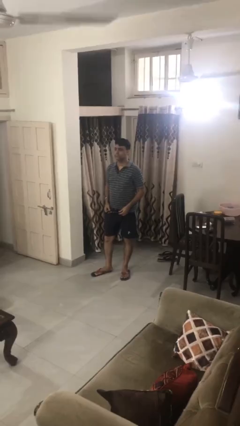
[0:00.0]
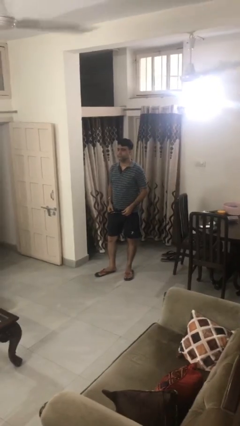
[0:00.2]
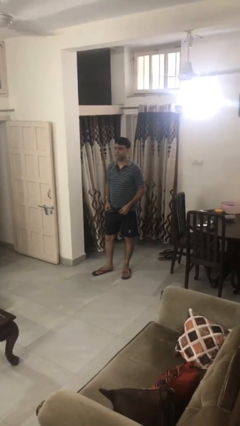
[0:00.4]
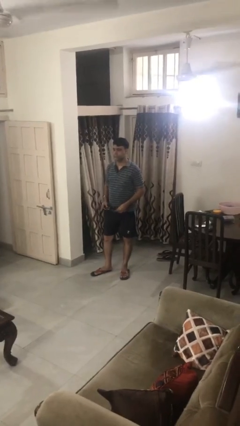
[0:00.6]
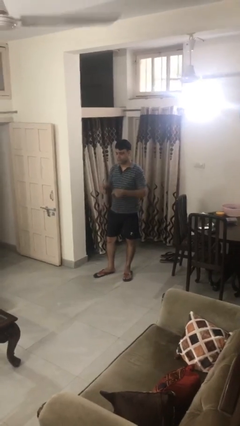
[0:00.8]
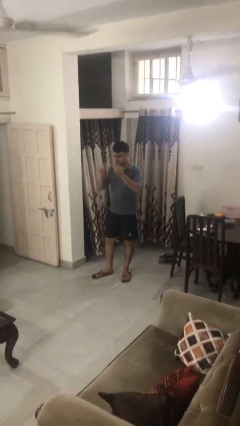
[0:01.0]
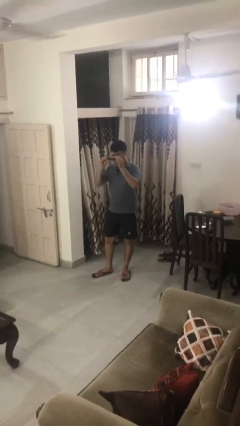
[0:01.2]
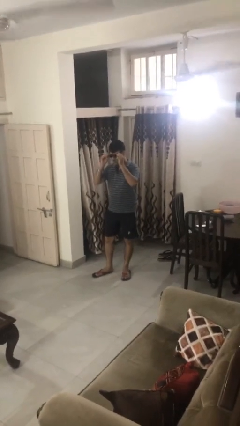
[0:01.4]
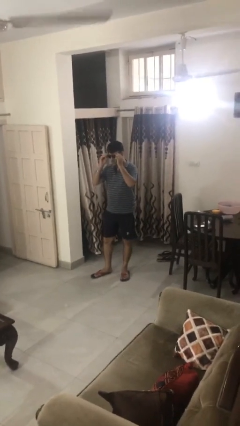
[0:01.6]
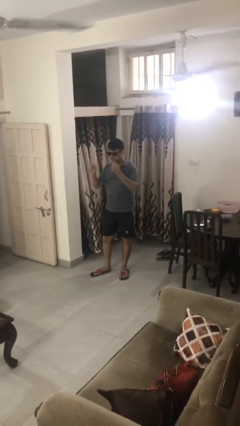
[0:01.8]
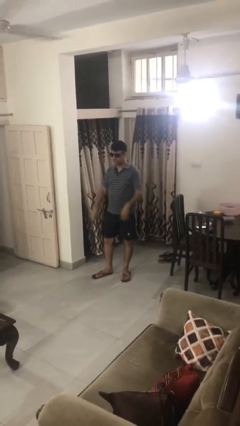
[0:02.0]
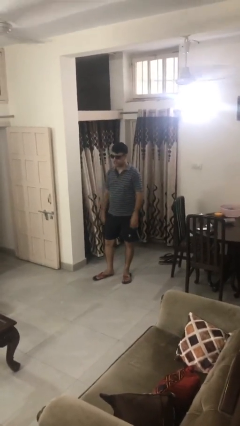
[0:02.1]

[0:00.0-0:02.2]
person puts on sunglasses

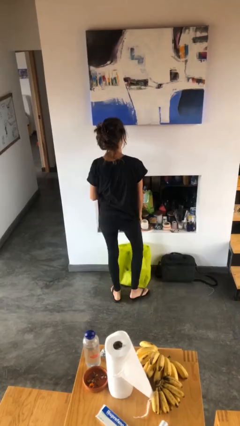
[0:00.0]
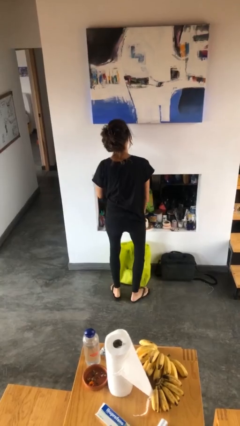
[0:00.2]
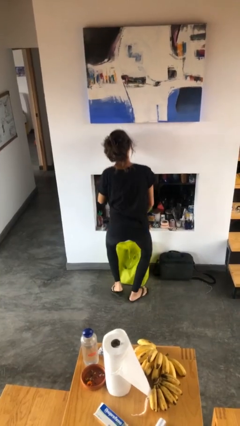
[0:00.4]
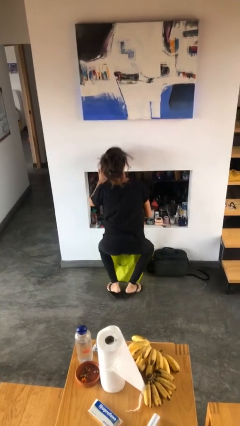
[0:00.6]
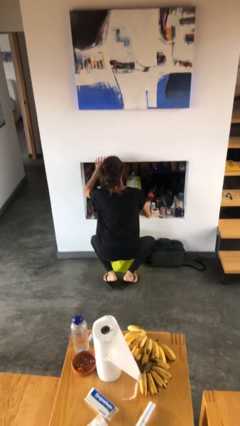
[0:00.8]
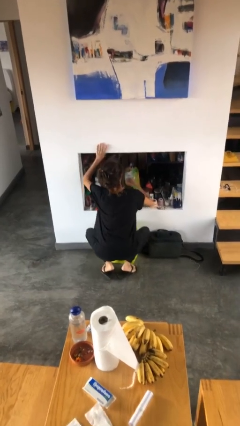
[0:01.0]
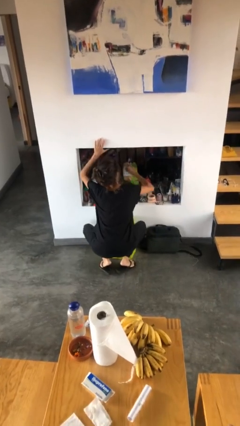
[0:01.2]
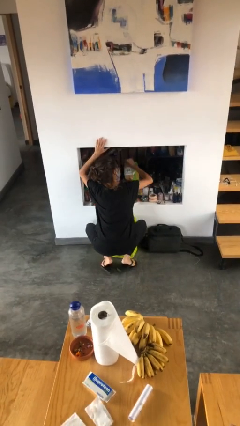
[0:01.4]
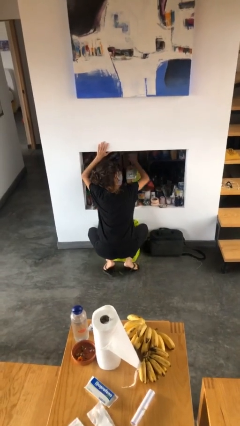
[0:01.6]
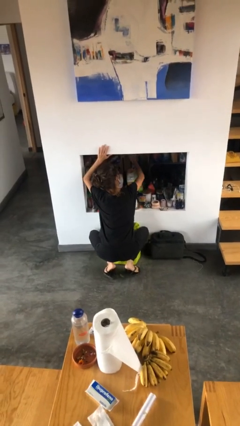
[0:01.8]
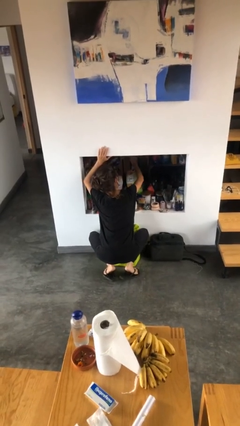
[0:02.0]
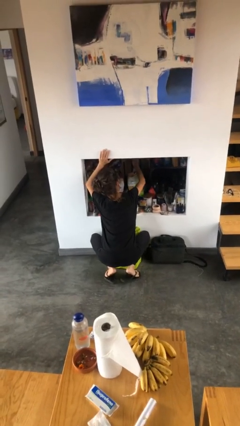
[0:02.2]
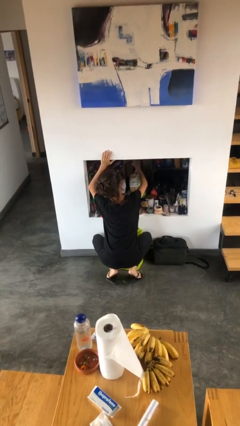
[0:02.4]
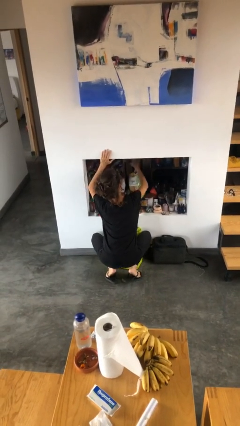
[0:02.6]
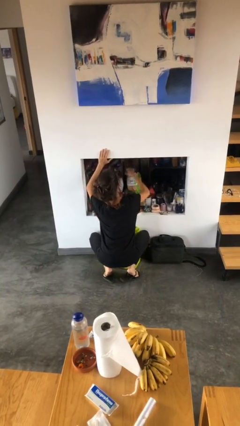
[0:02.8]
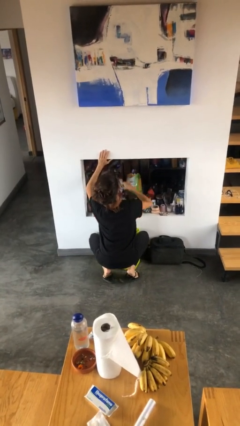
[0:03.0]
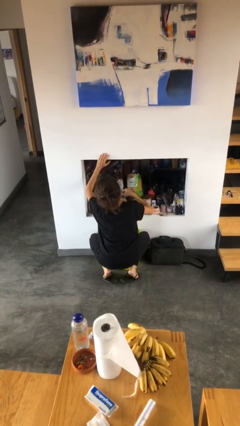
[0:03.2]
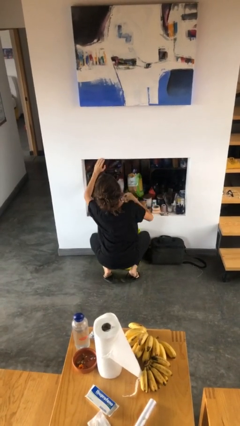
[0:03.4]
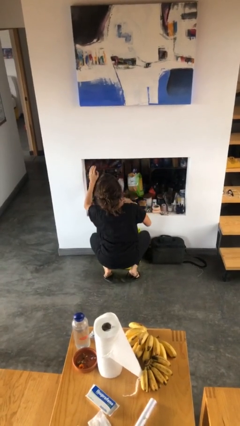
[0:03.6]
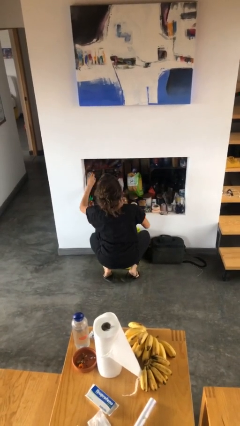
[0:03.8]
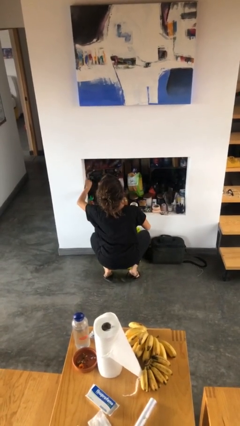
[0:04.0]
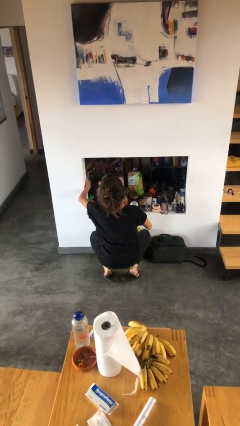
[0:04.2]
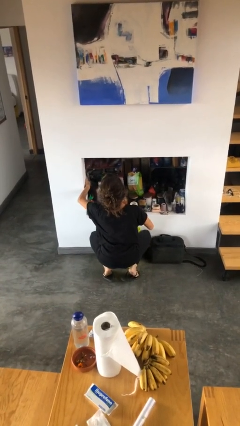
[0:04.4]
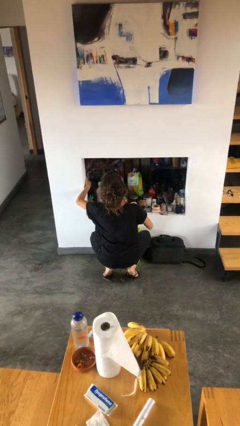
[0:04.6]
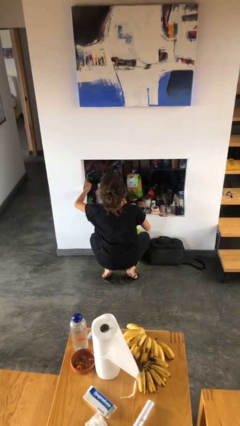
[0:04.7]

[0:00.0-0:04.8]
person searches in cabinet

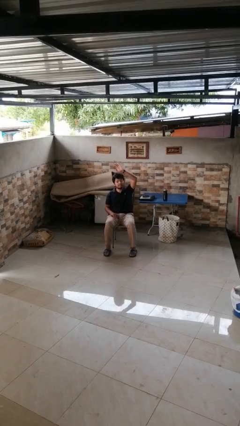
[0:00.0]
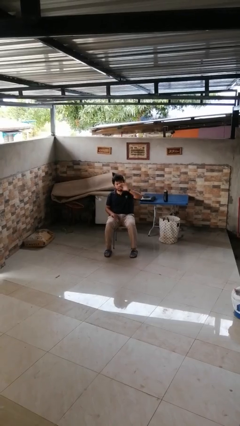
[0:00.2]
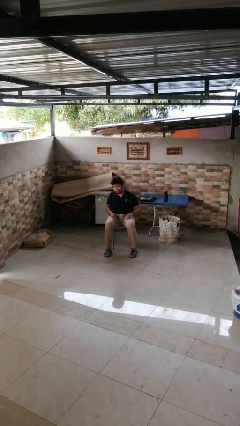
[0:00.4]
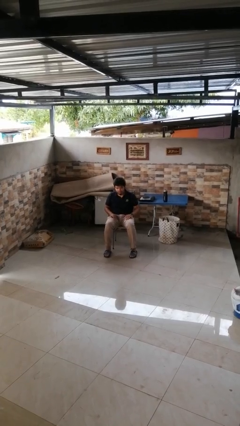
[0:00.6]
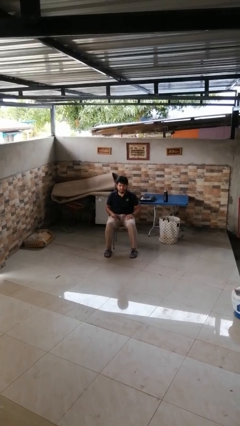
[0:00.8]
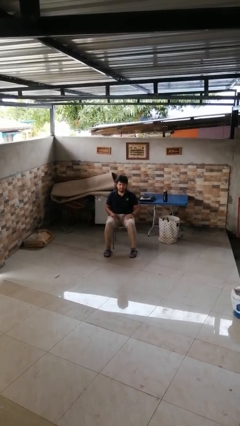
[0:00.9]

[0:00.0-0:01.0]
person gestures lower hand

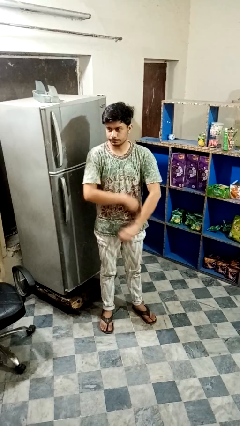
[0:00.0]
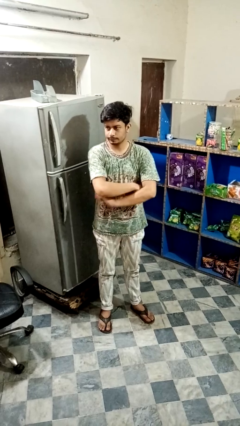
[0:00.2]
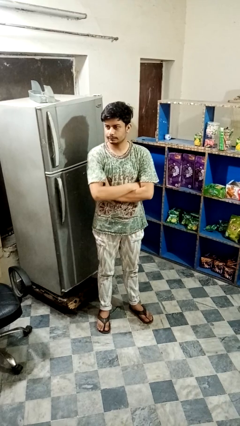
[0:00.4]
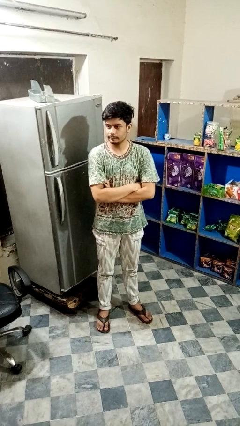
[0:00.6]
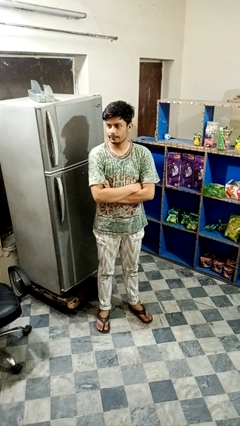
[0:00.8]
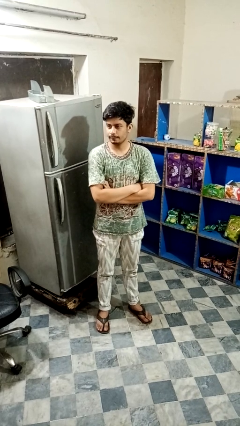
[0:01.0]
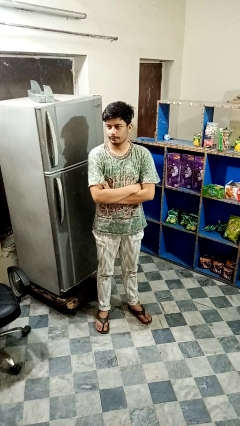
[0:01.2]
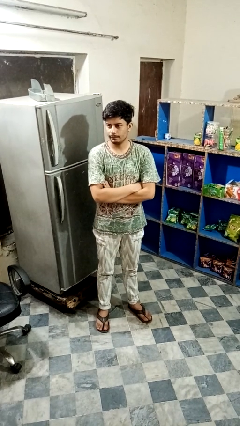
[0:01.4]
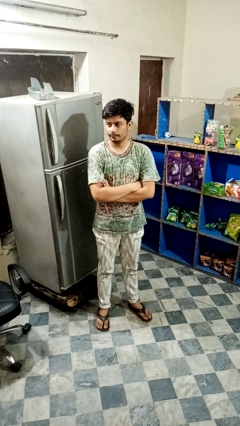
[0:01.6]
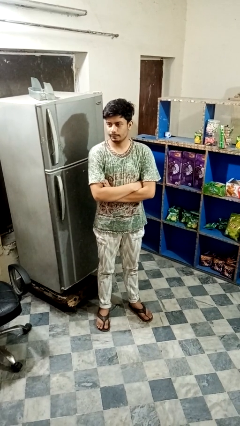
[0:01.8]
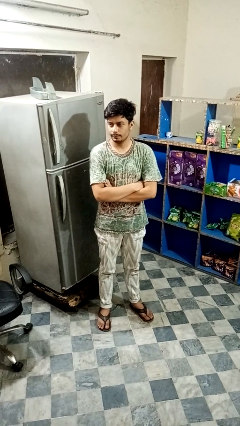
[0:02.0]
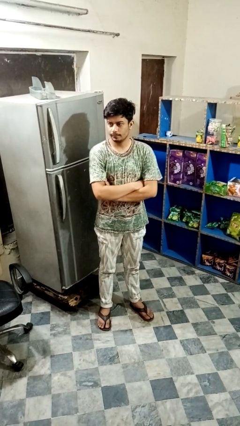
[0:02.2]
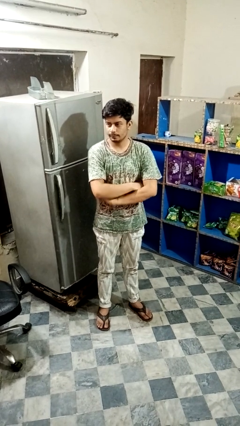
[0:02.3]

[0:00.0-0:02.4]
person crosses arms

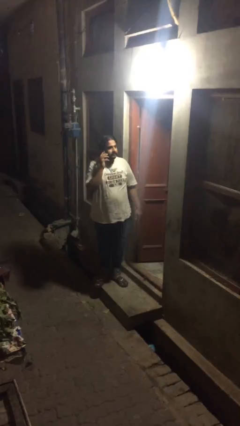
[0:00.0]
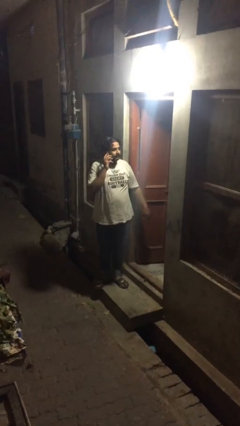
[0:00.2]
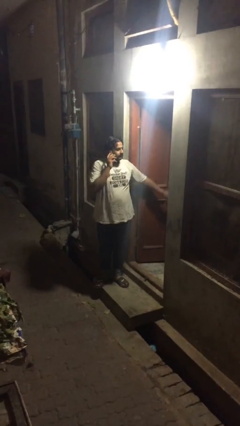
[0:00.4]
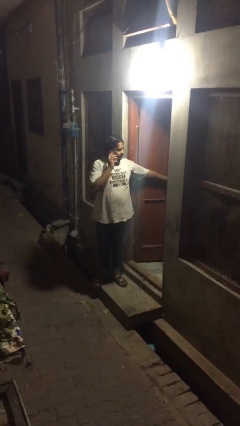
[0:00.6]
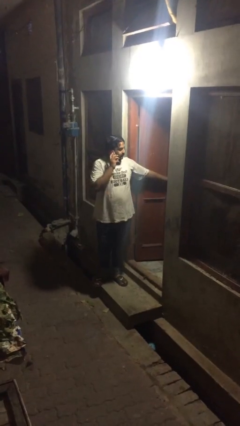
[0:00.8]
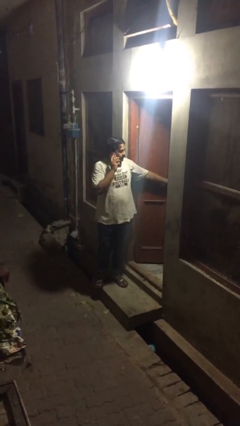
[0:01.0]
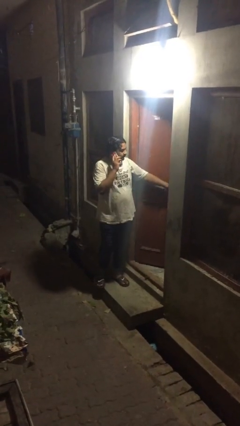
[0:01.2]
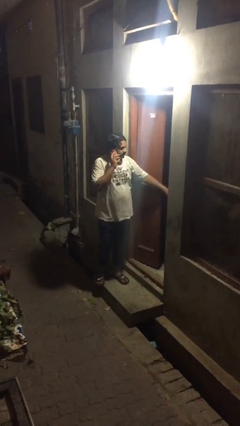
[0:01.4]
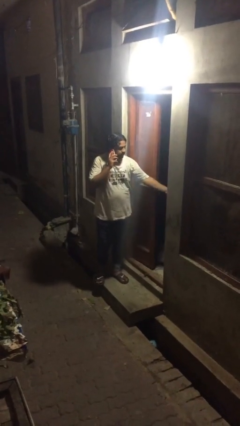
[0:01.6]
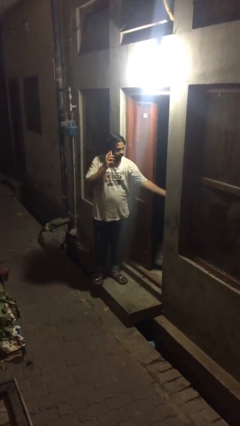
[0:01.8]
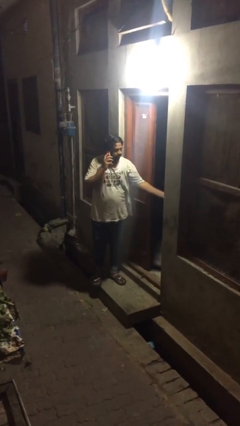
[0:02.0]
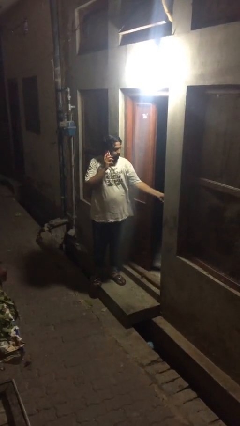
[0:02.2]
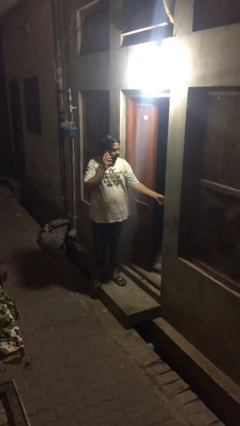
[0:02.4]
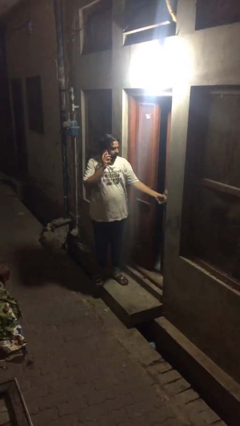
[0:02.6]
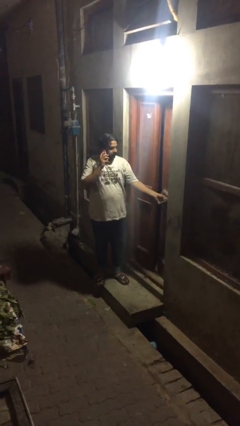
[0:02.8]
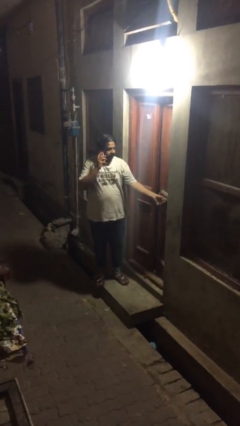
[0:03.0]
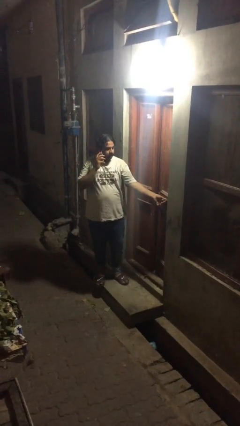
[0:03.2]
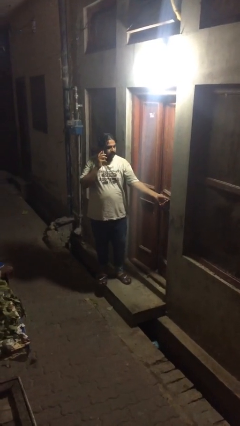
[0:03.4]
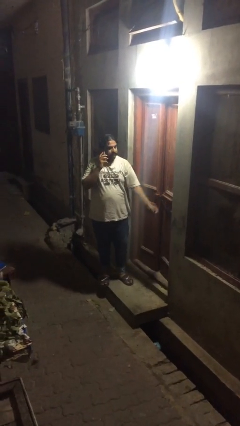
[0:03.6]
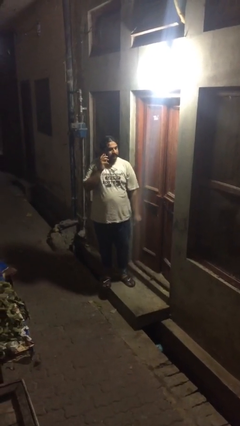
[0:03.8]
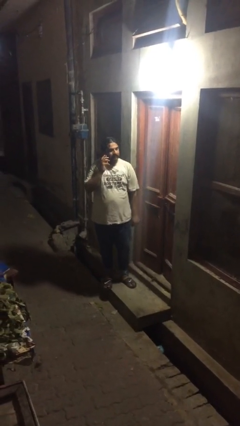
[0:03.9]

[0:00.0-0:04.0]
person closes facility door

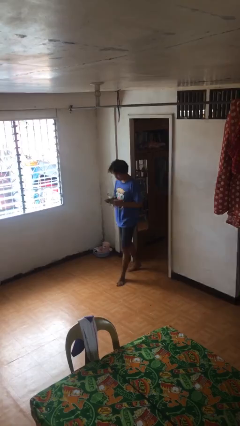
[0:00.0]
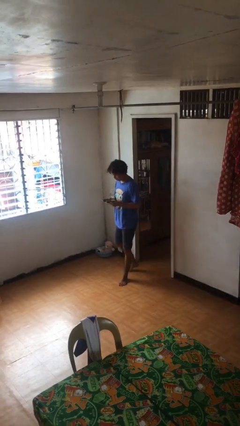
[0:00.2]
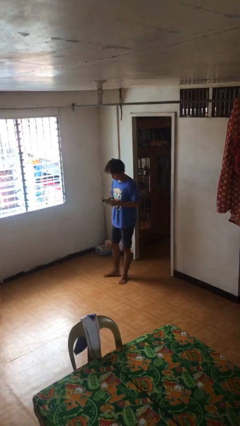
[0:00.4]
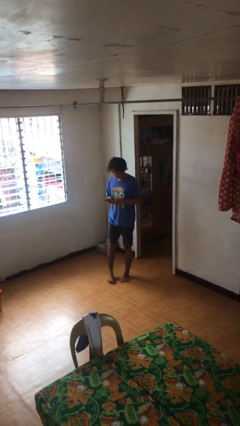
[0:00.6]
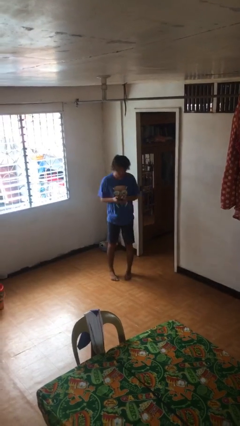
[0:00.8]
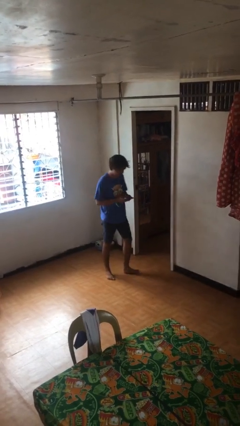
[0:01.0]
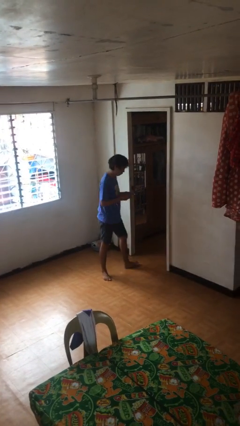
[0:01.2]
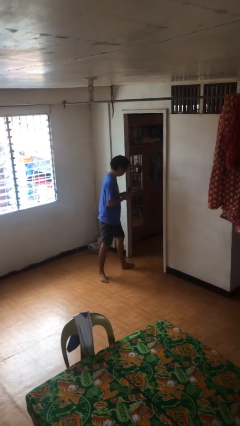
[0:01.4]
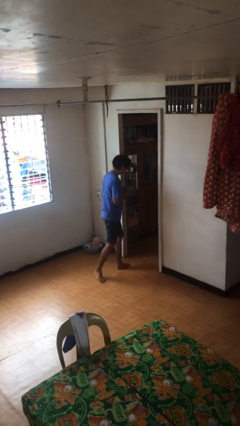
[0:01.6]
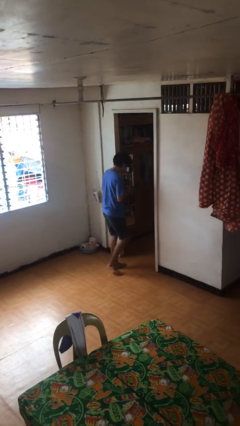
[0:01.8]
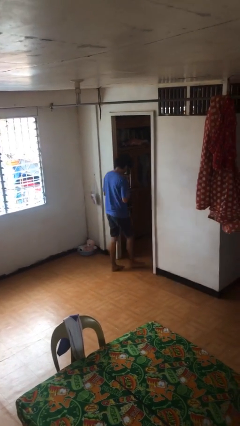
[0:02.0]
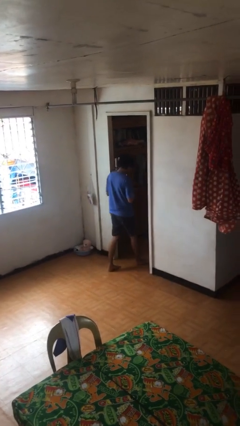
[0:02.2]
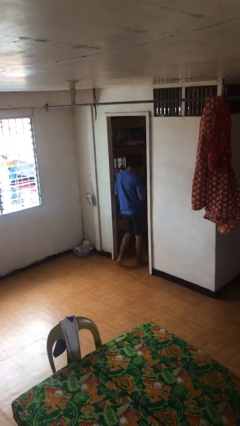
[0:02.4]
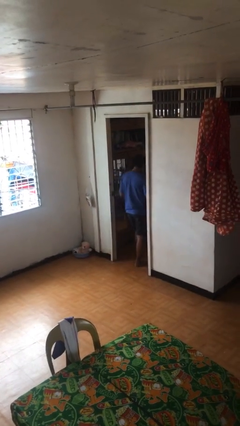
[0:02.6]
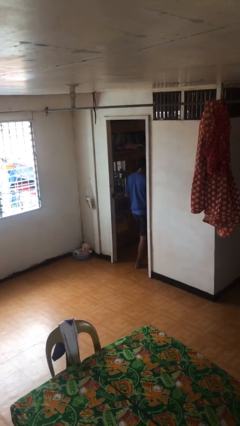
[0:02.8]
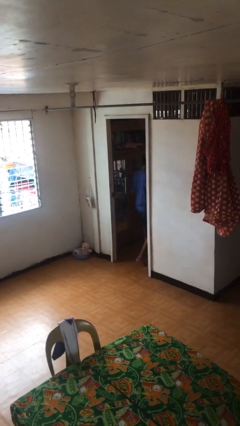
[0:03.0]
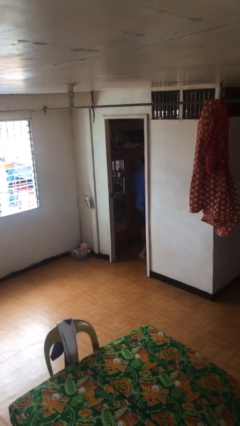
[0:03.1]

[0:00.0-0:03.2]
person enters scene through structure

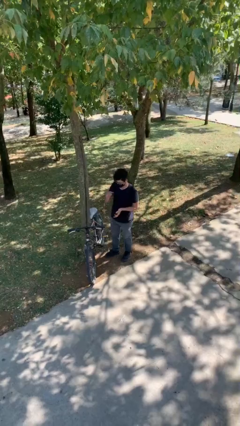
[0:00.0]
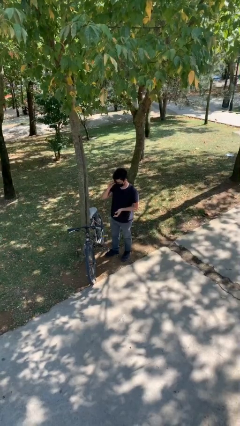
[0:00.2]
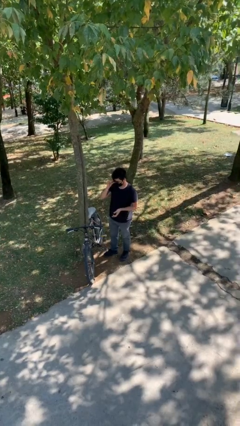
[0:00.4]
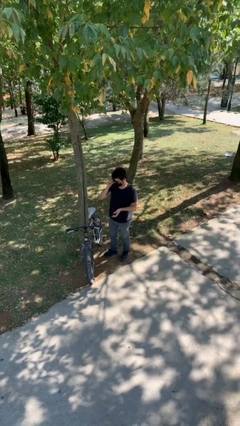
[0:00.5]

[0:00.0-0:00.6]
person picks up object from floor
